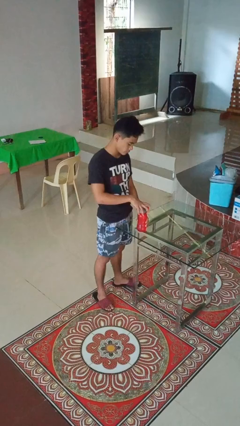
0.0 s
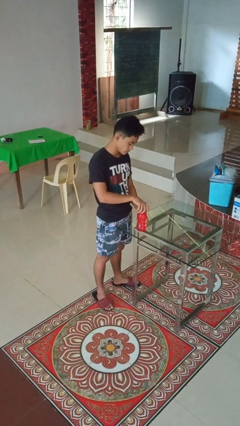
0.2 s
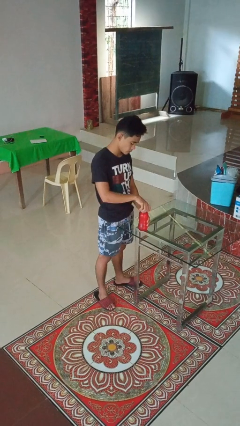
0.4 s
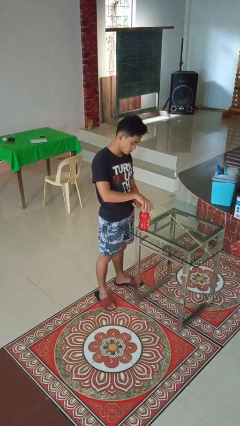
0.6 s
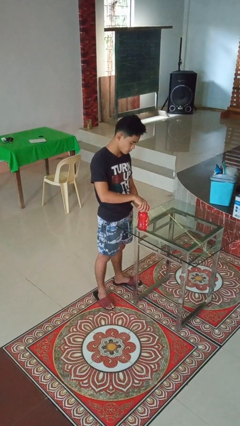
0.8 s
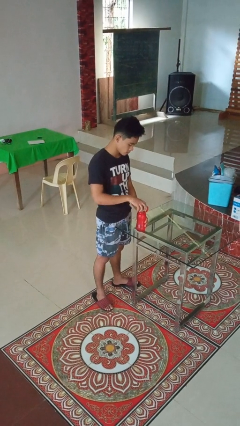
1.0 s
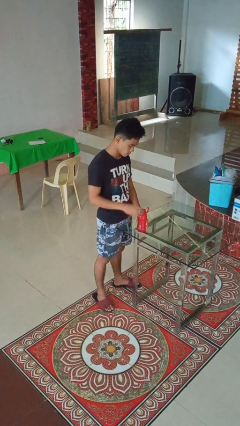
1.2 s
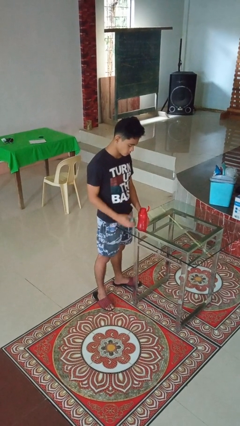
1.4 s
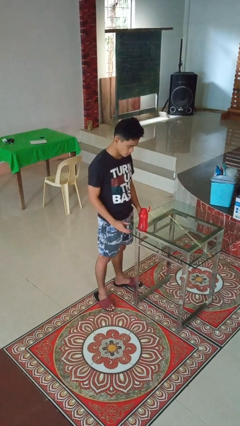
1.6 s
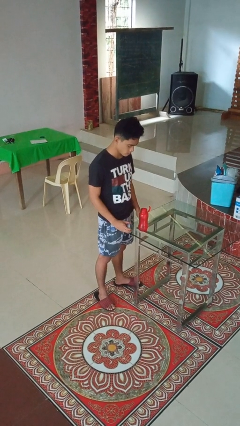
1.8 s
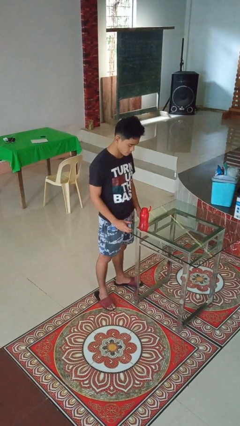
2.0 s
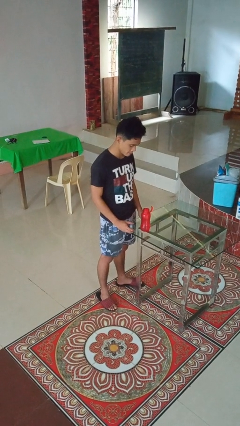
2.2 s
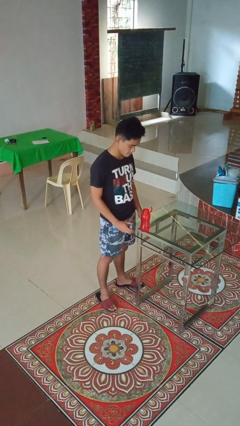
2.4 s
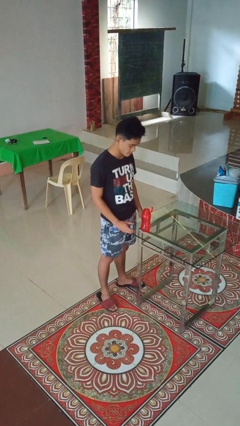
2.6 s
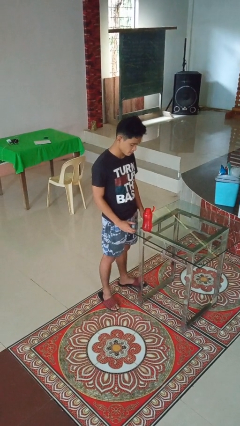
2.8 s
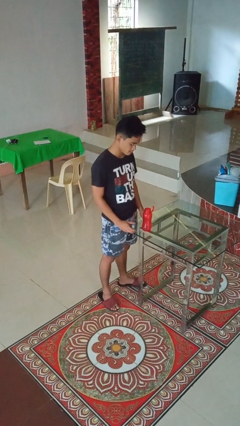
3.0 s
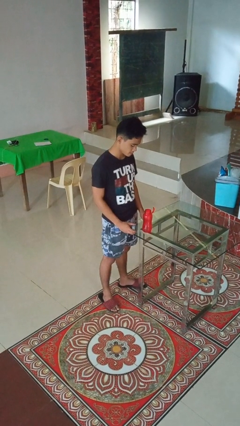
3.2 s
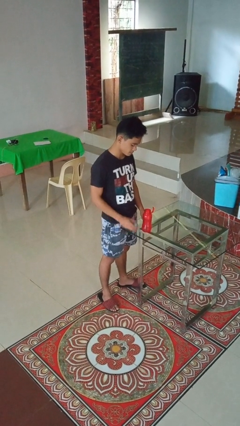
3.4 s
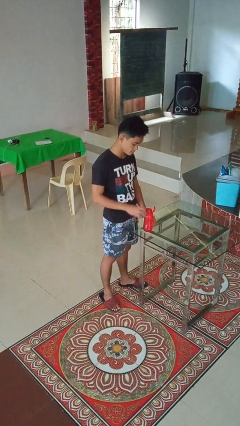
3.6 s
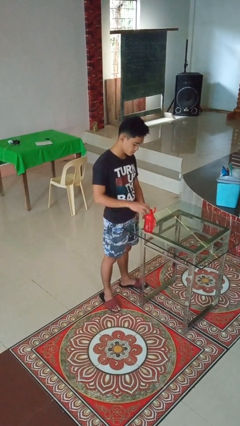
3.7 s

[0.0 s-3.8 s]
person unscrews lid from bottle

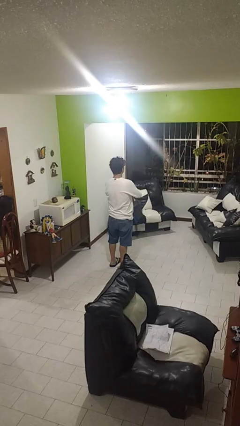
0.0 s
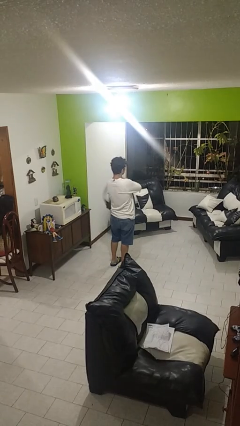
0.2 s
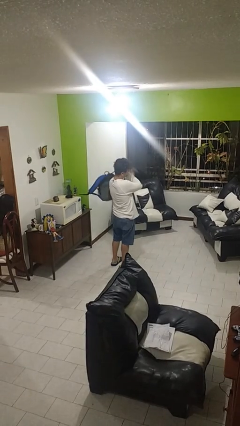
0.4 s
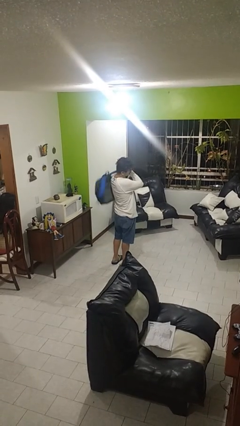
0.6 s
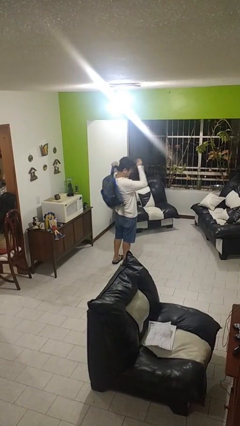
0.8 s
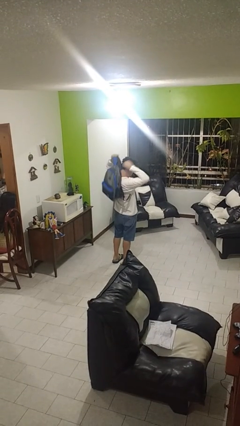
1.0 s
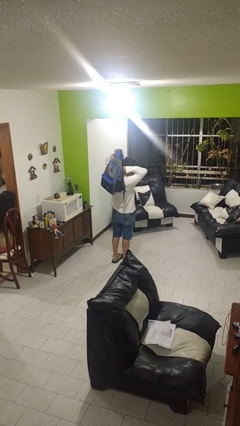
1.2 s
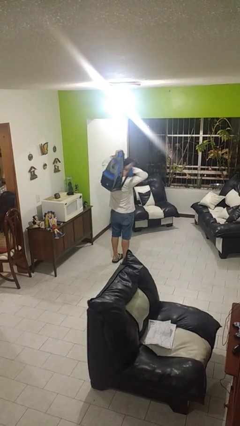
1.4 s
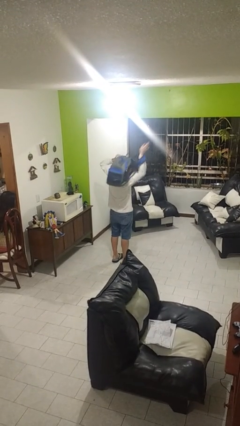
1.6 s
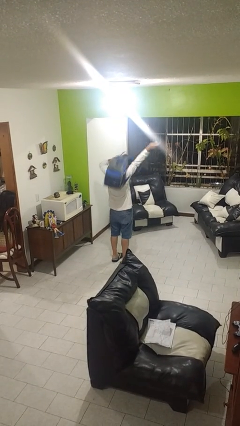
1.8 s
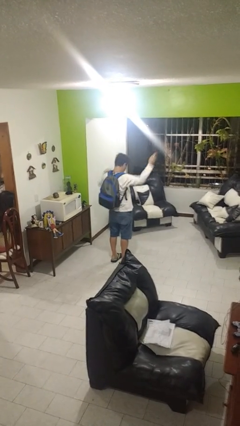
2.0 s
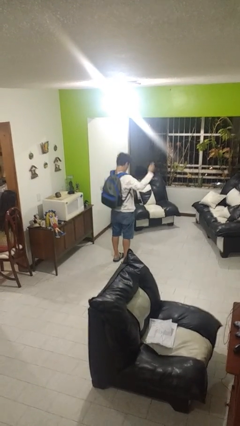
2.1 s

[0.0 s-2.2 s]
person puts on backpack

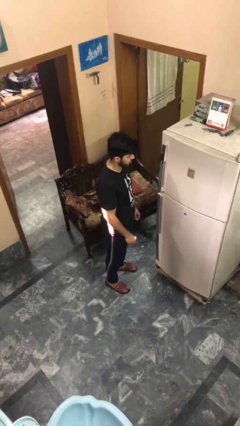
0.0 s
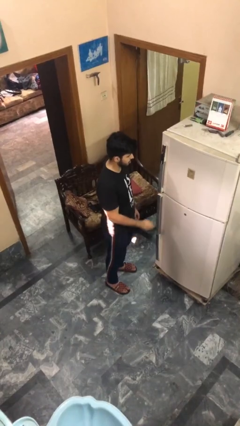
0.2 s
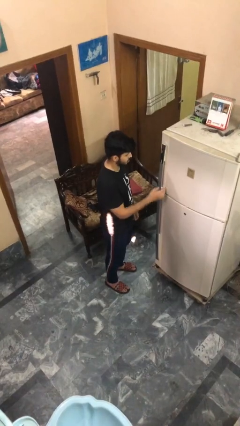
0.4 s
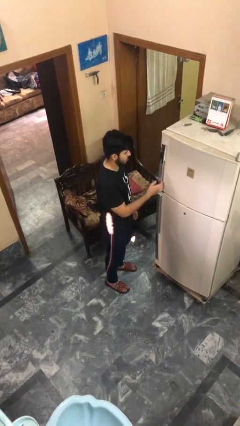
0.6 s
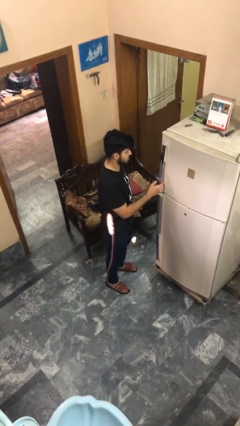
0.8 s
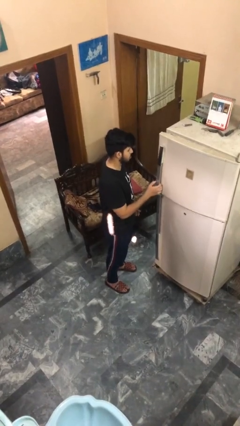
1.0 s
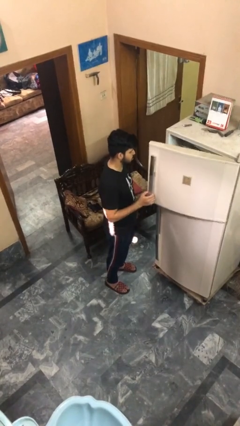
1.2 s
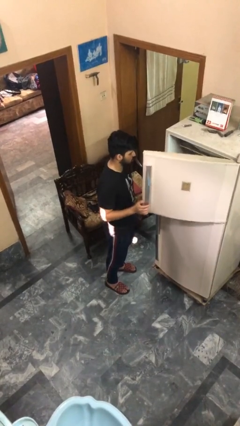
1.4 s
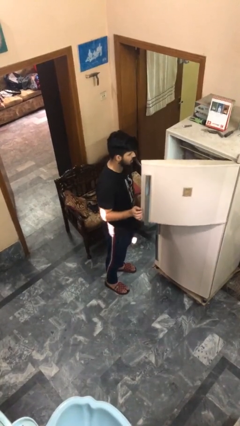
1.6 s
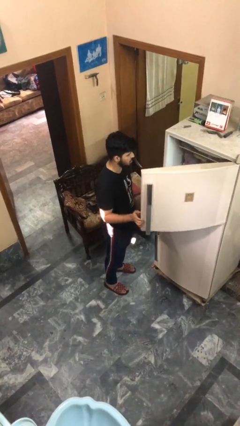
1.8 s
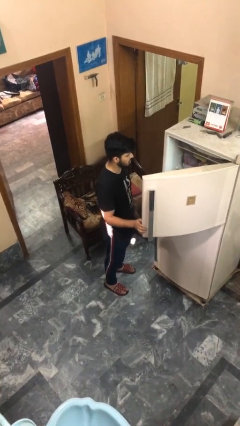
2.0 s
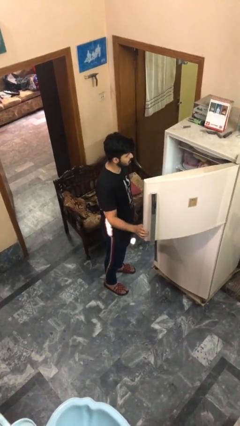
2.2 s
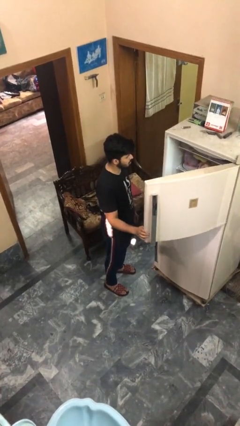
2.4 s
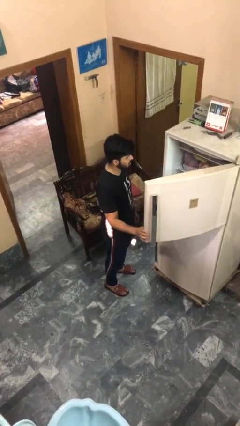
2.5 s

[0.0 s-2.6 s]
person opens refrigerator

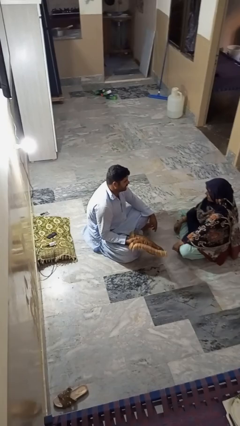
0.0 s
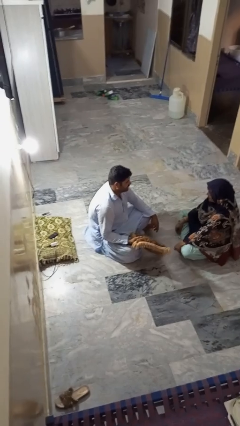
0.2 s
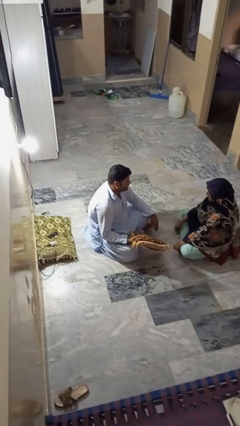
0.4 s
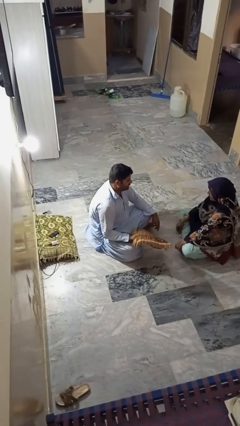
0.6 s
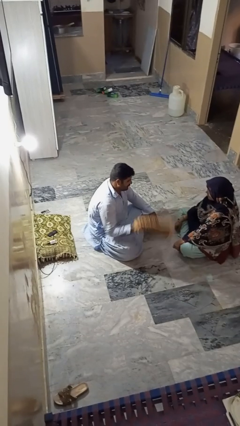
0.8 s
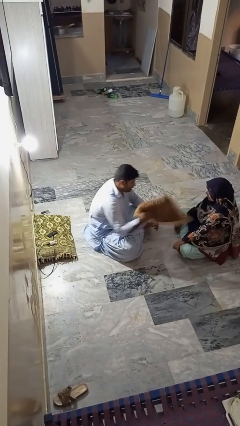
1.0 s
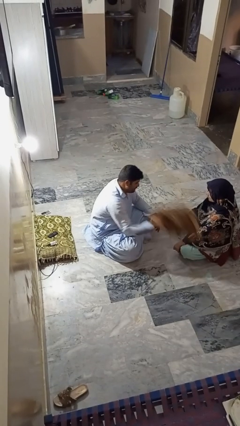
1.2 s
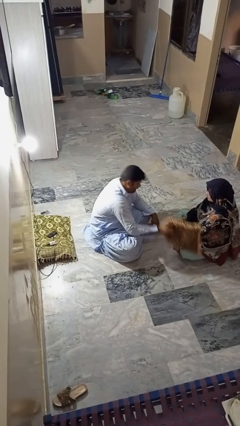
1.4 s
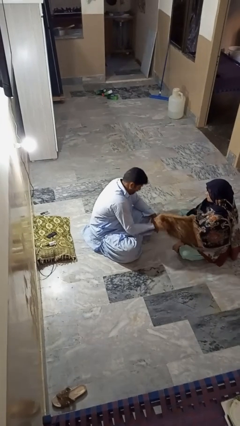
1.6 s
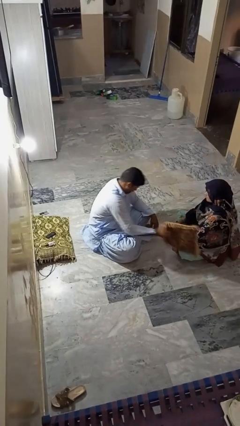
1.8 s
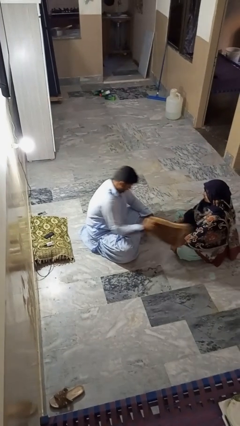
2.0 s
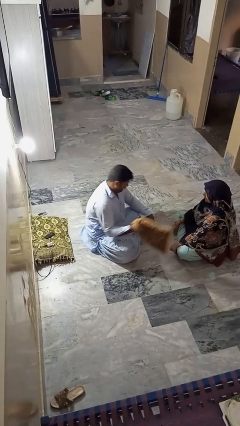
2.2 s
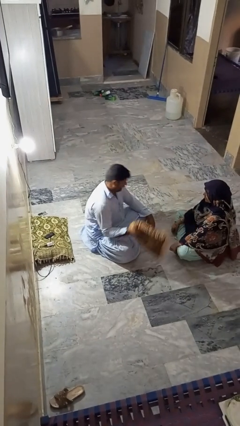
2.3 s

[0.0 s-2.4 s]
person hits person with pillow

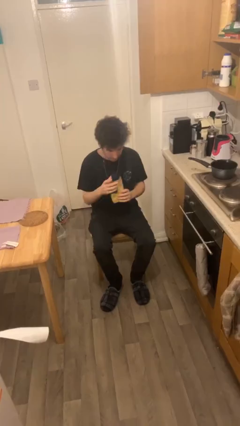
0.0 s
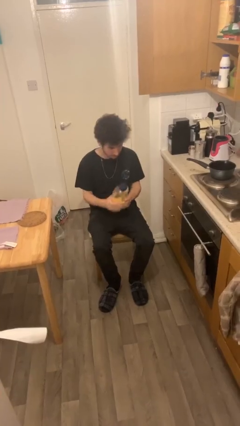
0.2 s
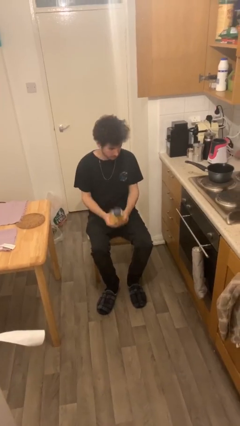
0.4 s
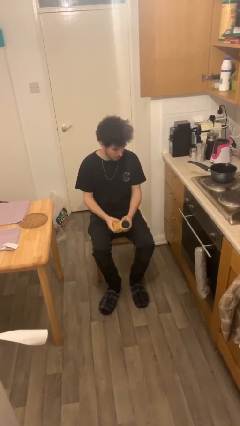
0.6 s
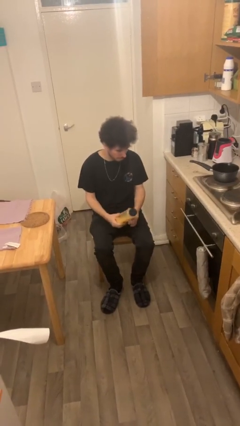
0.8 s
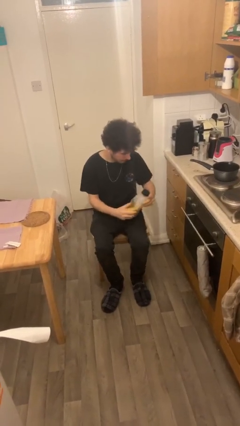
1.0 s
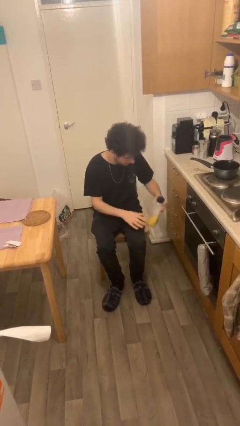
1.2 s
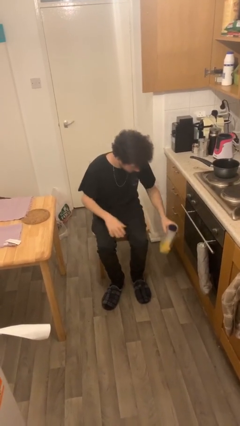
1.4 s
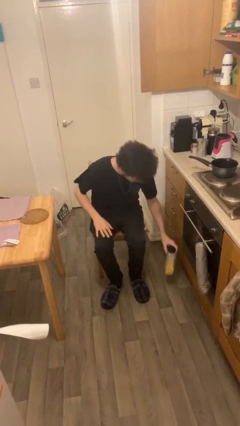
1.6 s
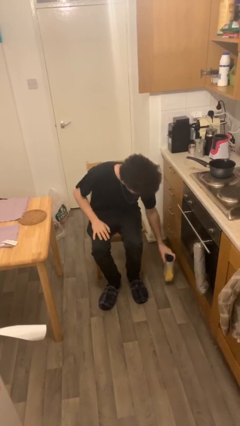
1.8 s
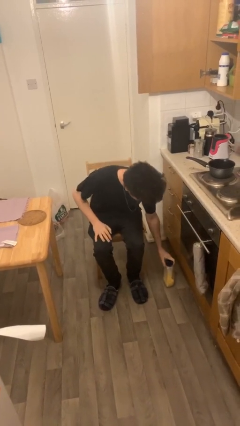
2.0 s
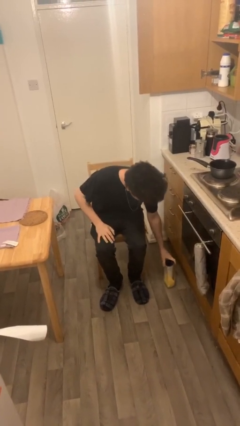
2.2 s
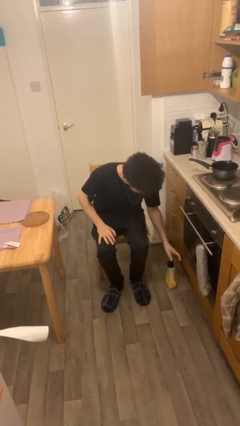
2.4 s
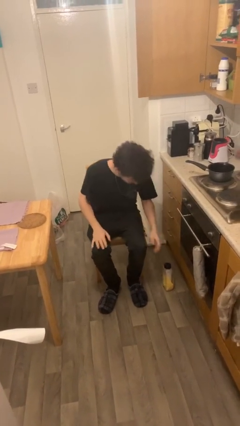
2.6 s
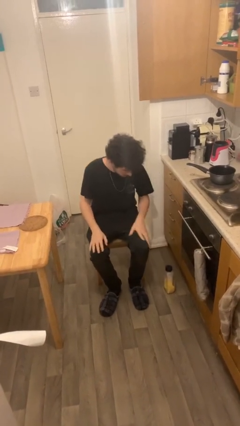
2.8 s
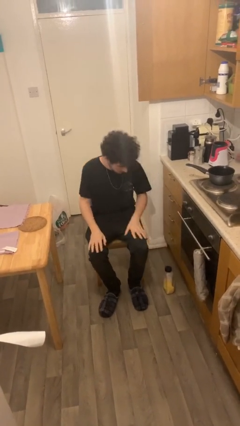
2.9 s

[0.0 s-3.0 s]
person puts down object on floor

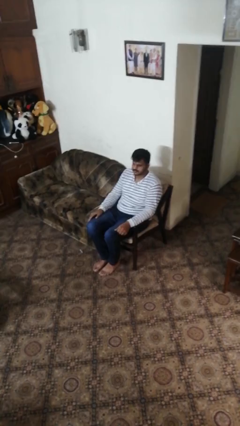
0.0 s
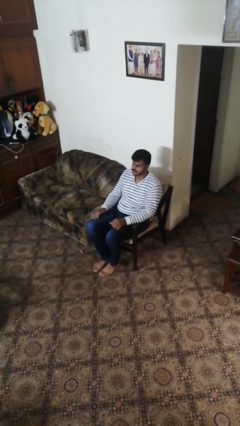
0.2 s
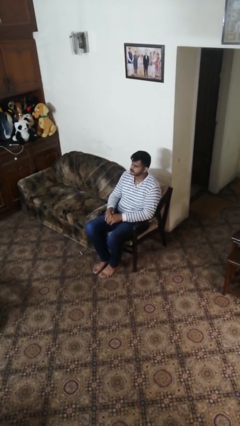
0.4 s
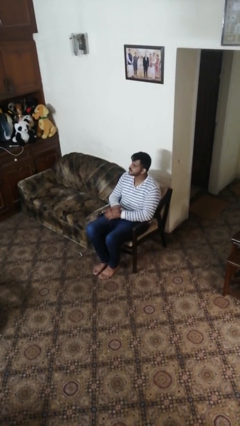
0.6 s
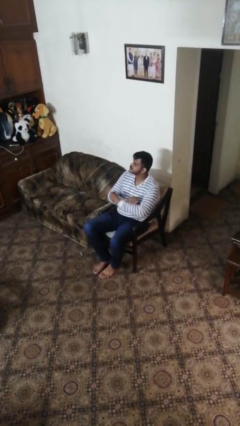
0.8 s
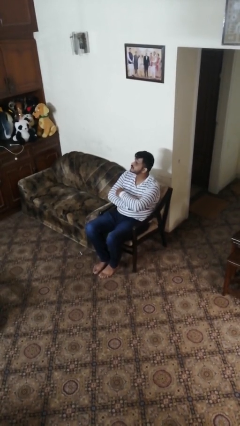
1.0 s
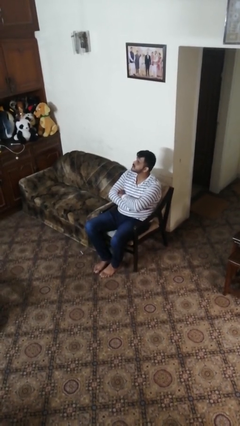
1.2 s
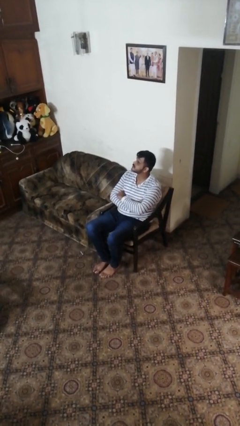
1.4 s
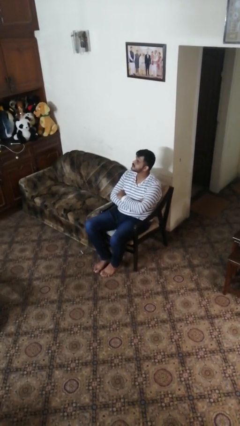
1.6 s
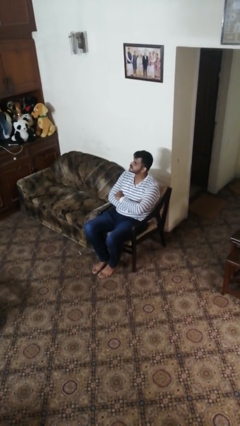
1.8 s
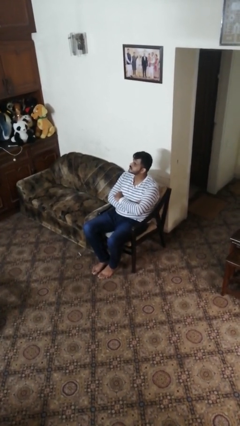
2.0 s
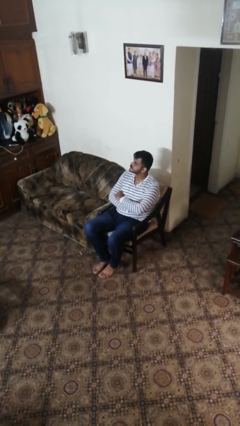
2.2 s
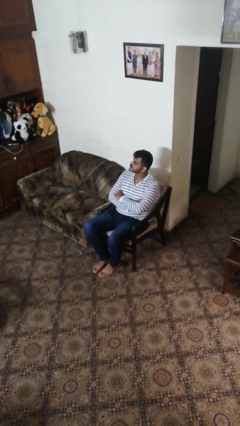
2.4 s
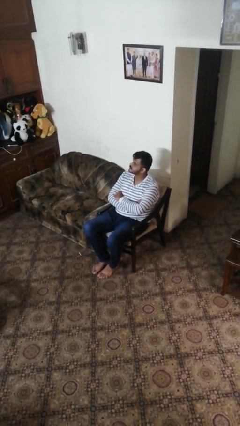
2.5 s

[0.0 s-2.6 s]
person crosses arms

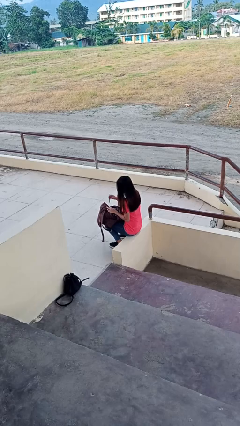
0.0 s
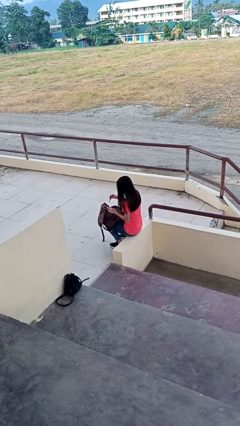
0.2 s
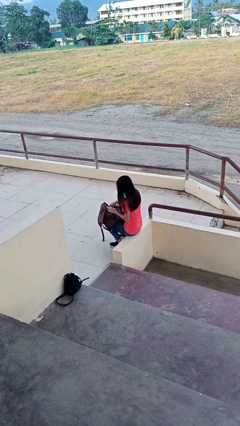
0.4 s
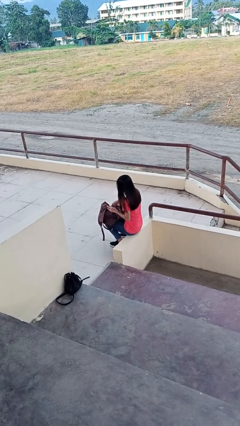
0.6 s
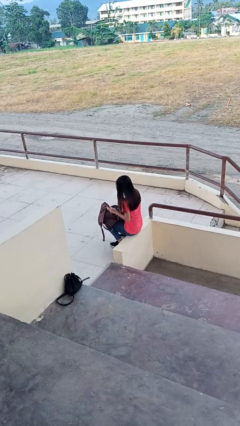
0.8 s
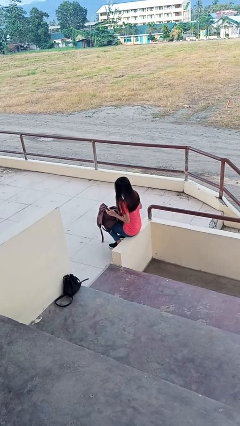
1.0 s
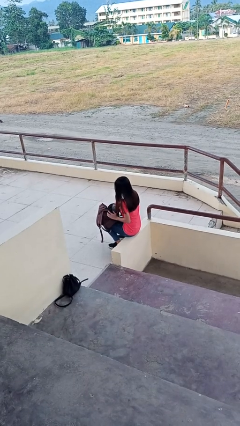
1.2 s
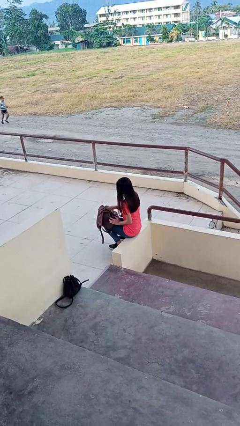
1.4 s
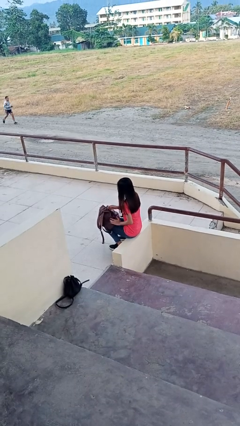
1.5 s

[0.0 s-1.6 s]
person puts object into backpack
